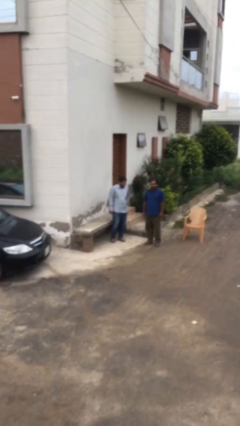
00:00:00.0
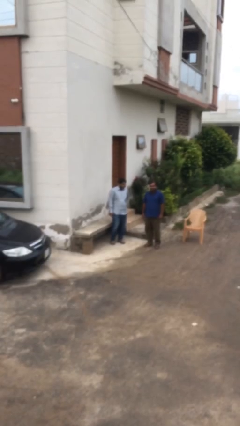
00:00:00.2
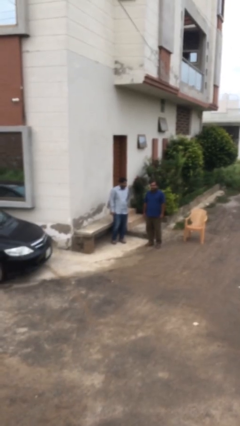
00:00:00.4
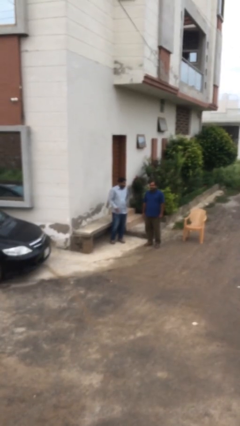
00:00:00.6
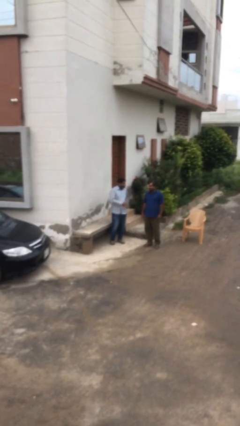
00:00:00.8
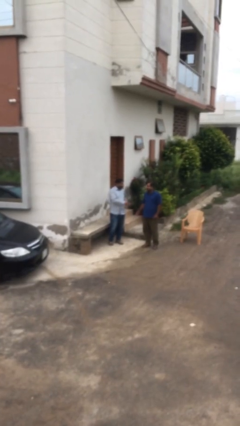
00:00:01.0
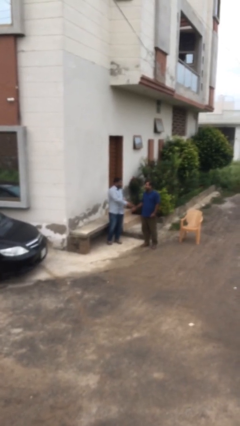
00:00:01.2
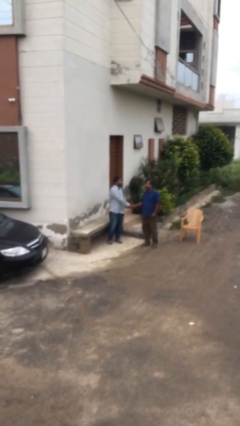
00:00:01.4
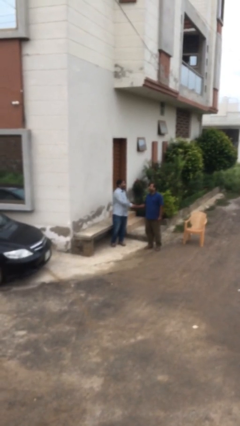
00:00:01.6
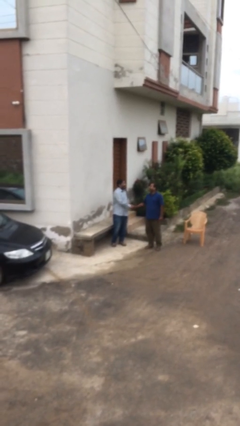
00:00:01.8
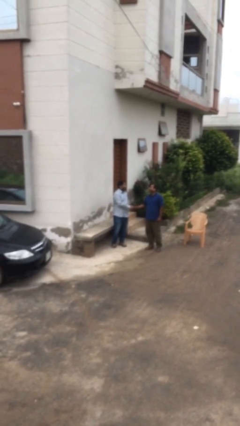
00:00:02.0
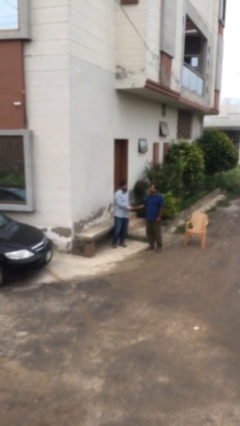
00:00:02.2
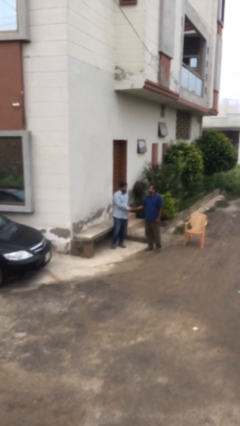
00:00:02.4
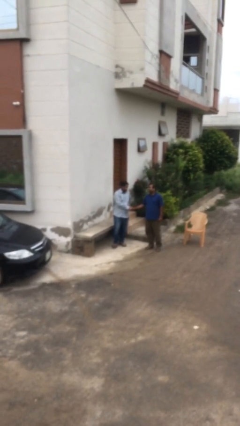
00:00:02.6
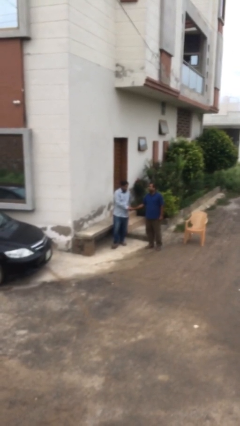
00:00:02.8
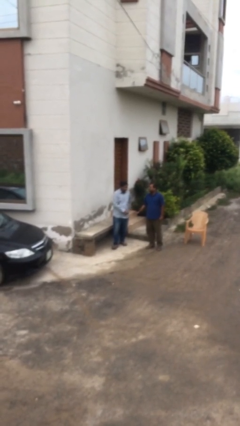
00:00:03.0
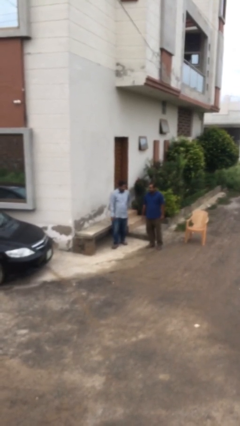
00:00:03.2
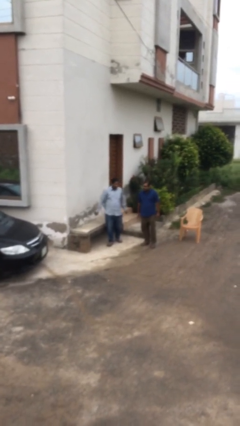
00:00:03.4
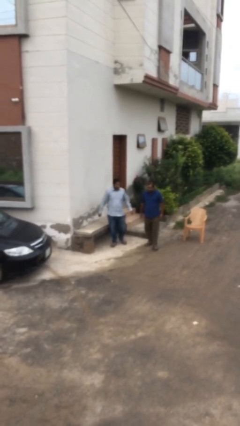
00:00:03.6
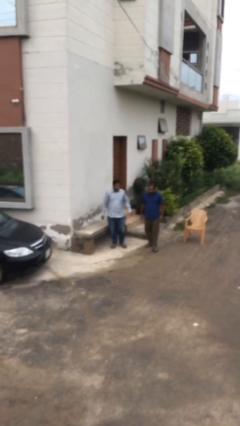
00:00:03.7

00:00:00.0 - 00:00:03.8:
person shakes hand

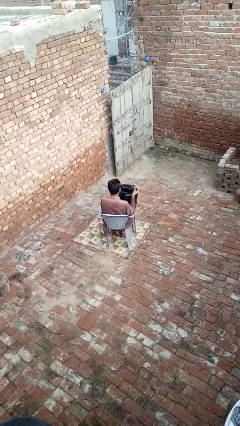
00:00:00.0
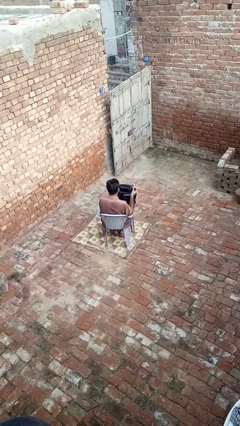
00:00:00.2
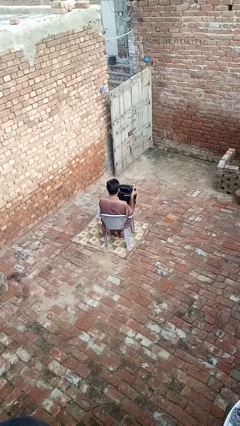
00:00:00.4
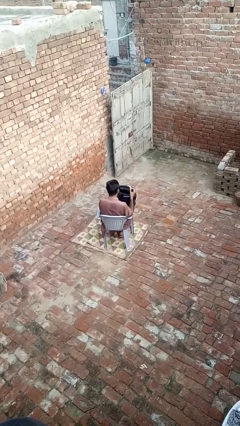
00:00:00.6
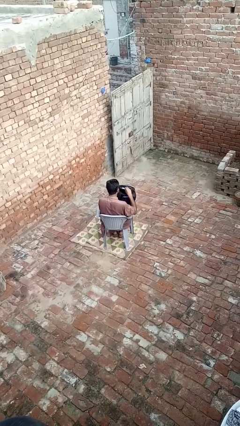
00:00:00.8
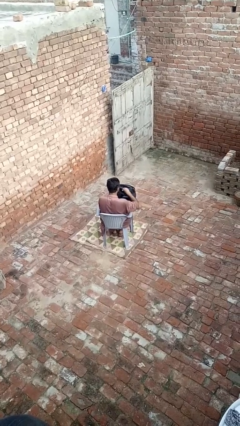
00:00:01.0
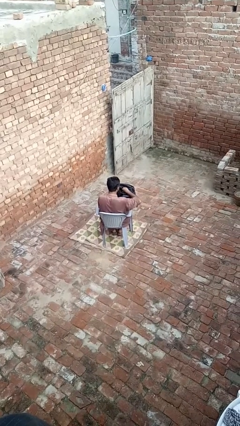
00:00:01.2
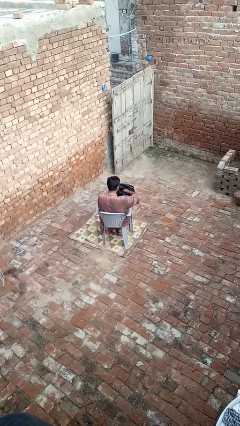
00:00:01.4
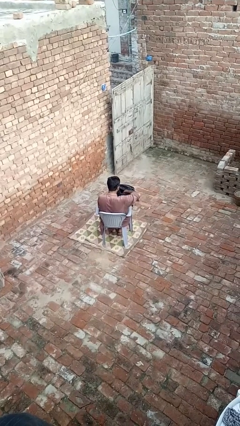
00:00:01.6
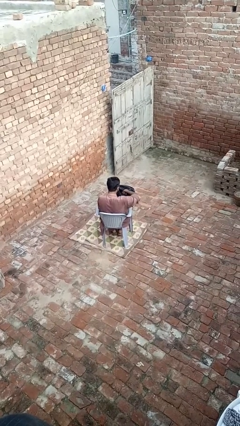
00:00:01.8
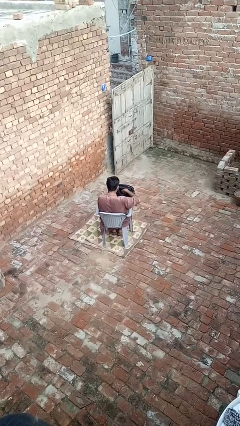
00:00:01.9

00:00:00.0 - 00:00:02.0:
person puts object into backpack

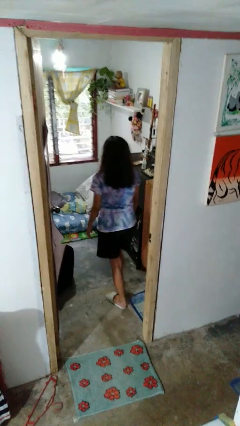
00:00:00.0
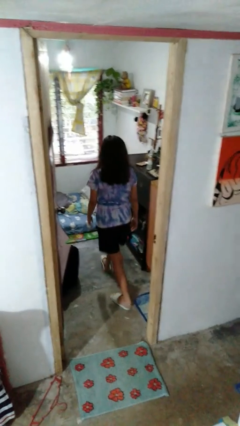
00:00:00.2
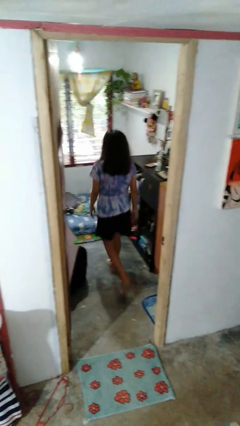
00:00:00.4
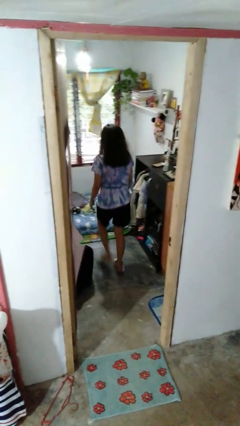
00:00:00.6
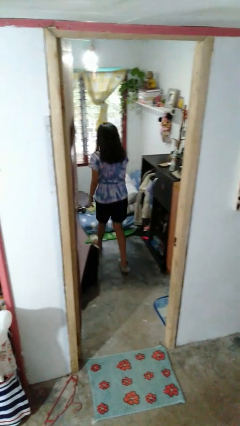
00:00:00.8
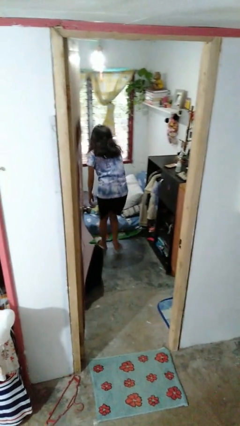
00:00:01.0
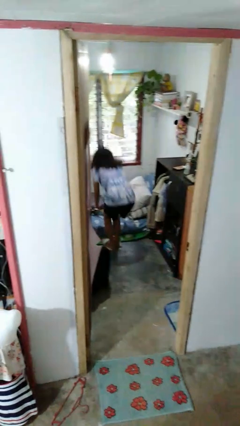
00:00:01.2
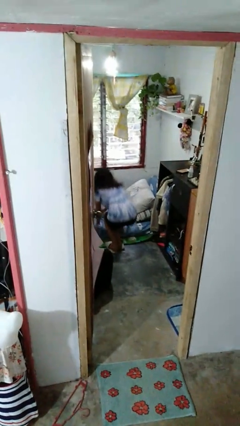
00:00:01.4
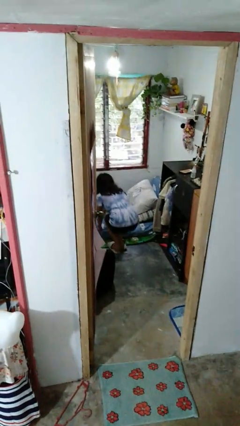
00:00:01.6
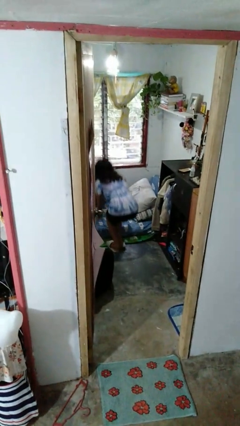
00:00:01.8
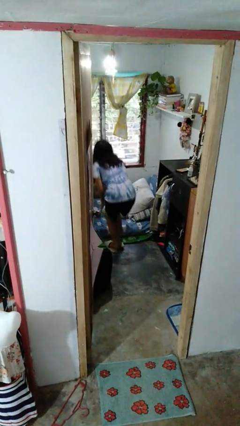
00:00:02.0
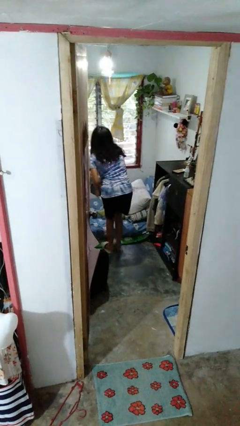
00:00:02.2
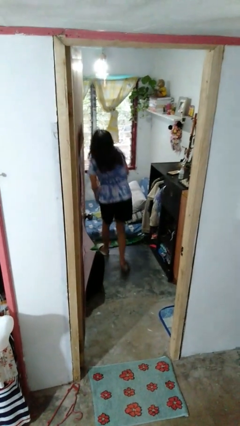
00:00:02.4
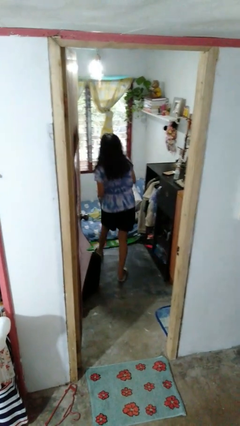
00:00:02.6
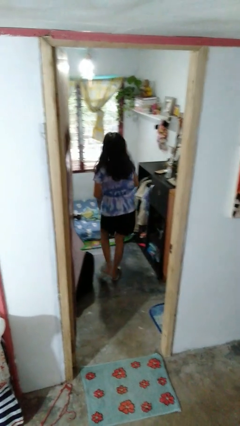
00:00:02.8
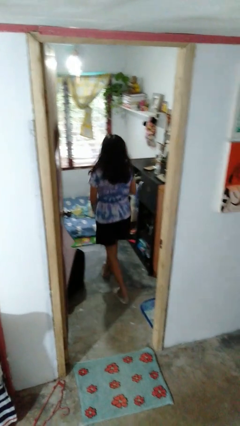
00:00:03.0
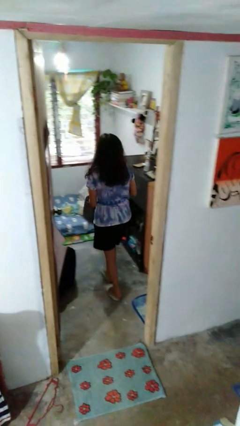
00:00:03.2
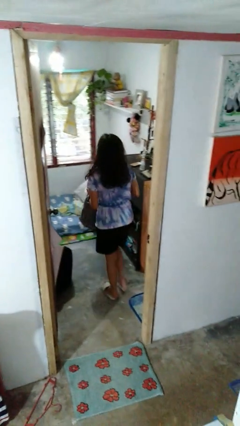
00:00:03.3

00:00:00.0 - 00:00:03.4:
person picks up object from bed

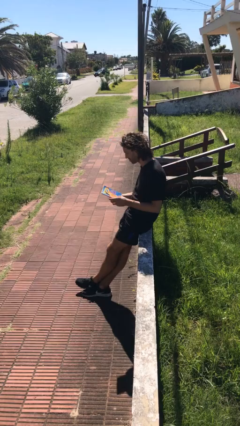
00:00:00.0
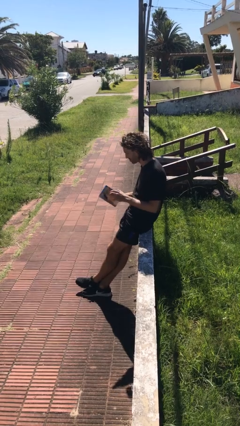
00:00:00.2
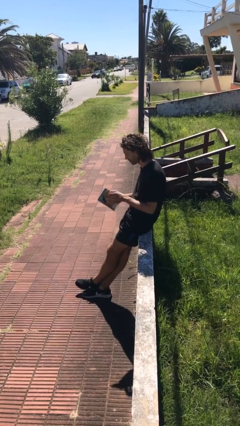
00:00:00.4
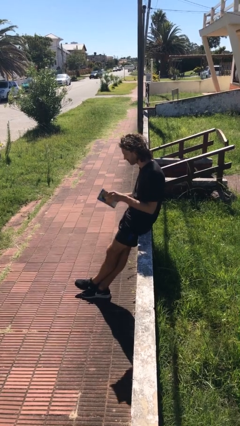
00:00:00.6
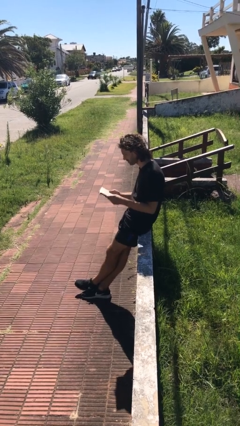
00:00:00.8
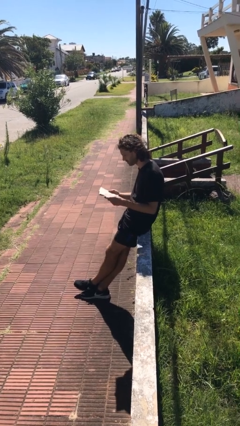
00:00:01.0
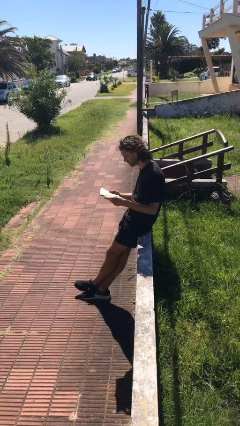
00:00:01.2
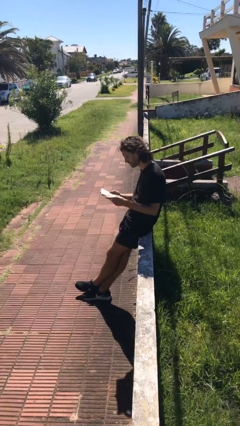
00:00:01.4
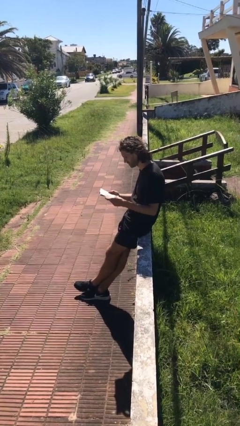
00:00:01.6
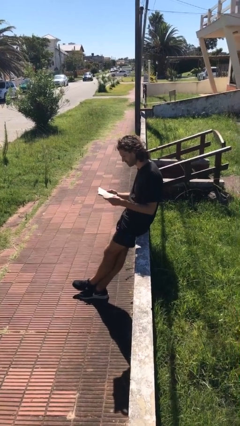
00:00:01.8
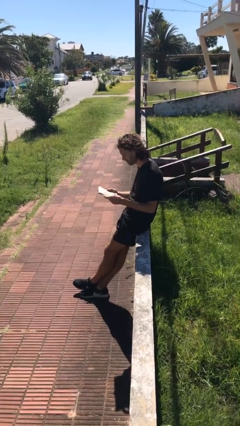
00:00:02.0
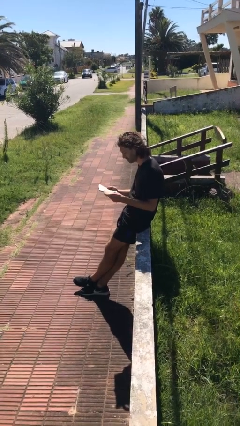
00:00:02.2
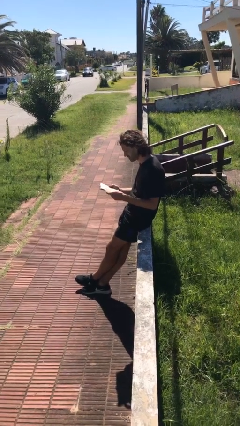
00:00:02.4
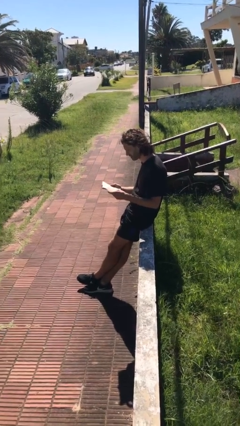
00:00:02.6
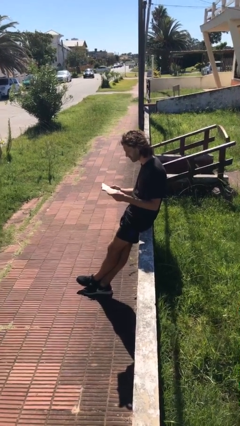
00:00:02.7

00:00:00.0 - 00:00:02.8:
person reads document

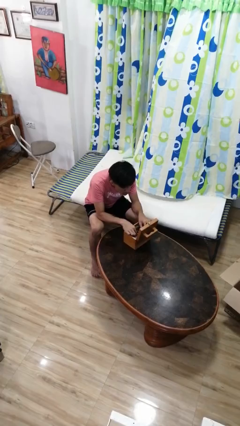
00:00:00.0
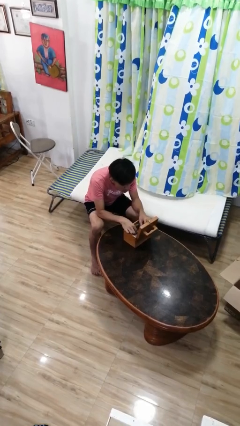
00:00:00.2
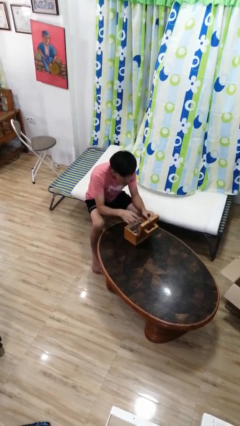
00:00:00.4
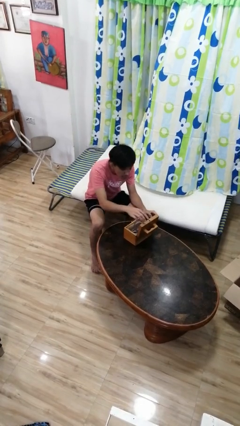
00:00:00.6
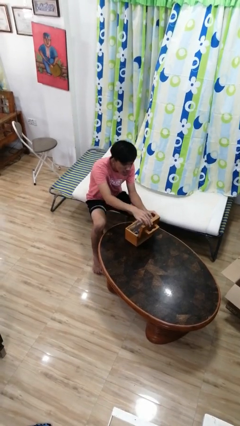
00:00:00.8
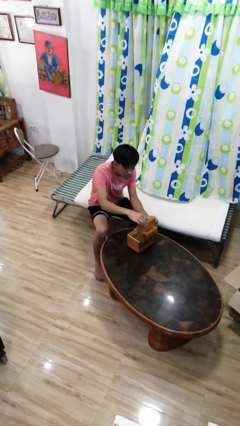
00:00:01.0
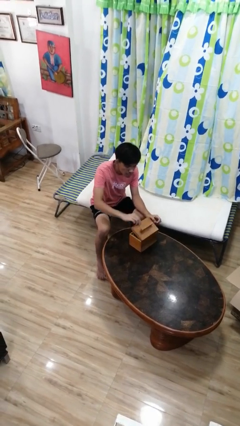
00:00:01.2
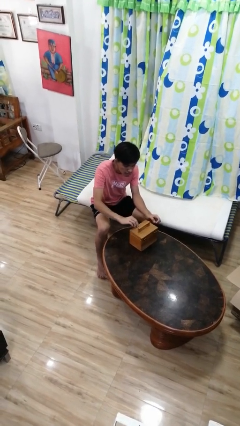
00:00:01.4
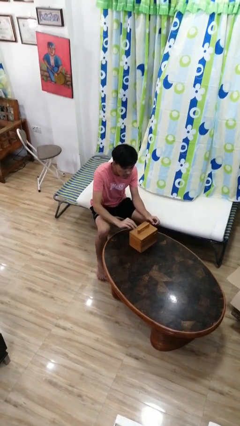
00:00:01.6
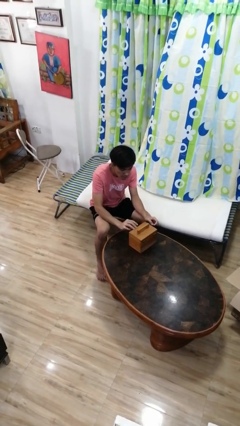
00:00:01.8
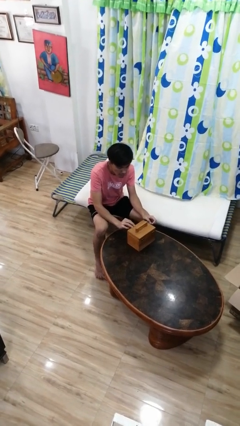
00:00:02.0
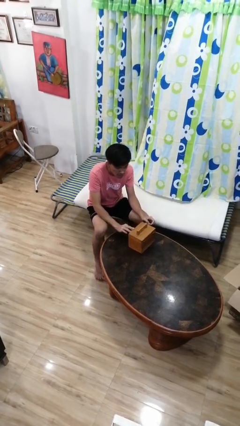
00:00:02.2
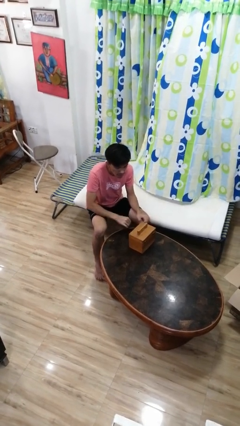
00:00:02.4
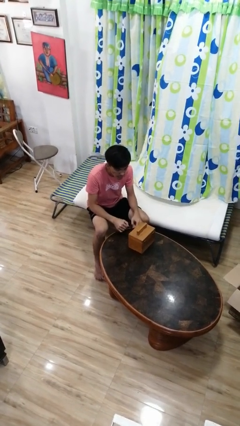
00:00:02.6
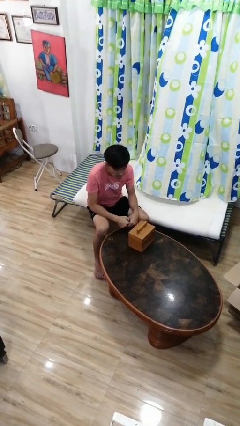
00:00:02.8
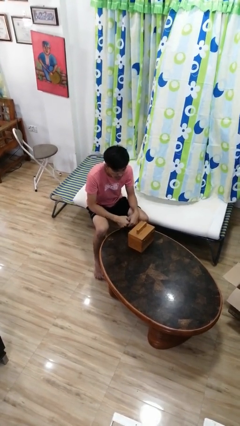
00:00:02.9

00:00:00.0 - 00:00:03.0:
person closes jewelry box

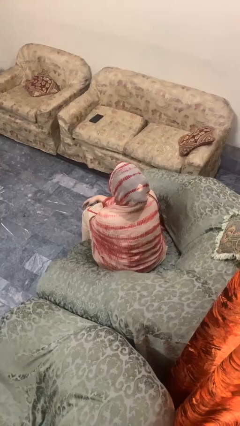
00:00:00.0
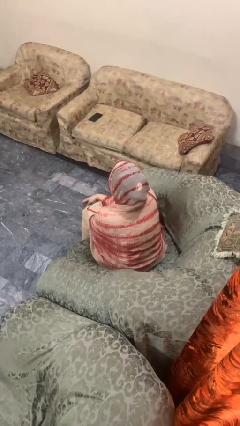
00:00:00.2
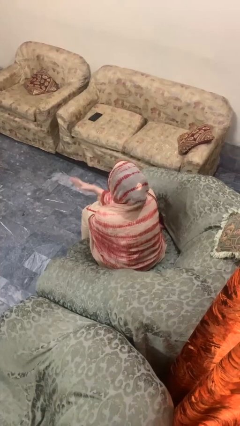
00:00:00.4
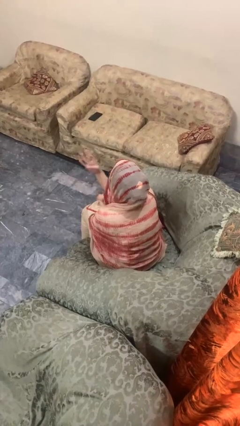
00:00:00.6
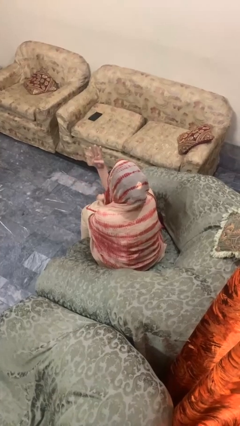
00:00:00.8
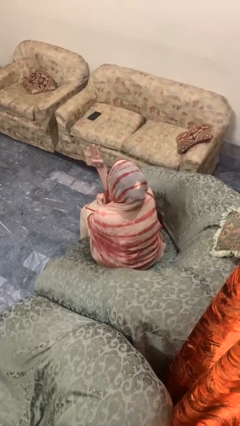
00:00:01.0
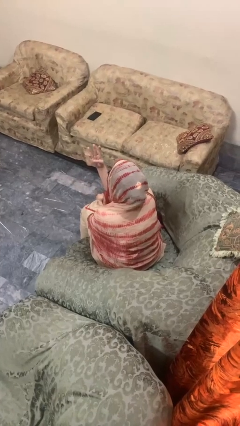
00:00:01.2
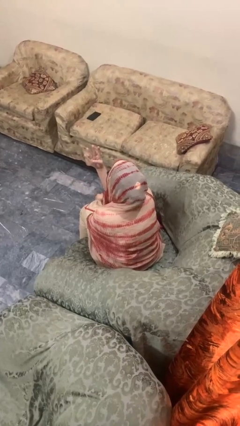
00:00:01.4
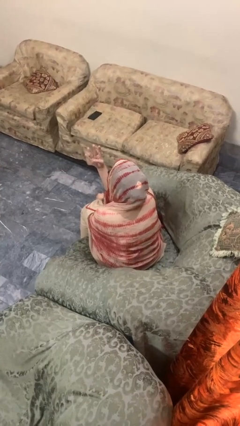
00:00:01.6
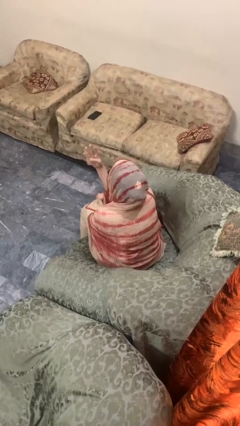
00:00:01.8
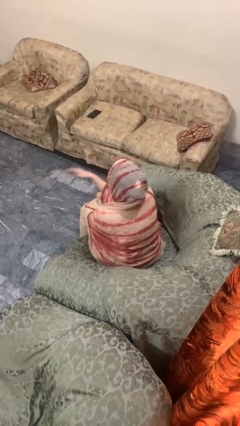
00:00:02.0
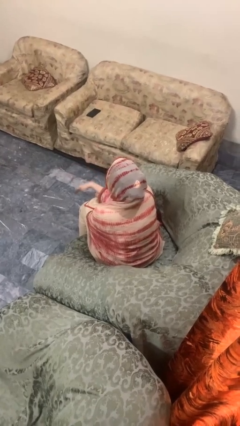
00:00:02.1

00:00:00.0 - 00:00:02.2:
person gestures number four

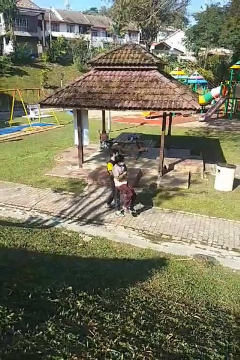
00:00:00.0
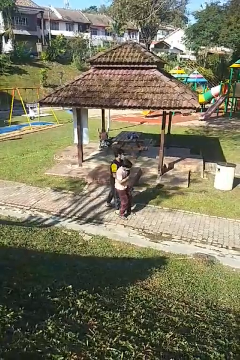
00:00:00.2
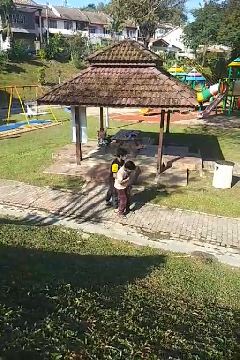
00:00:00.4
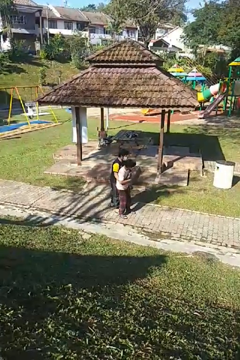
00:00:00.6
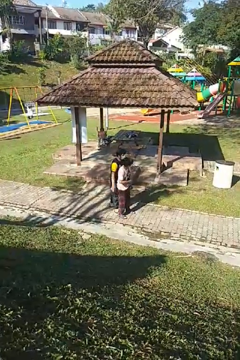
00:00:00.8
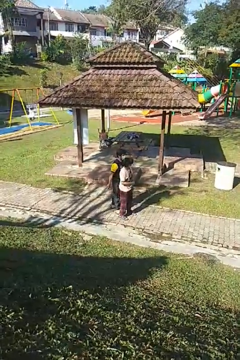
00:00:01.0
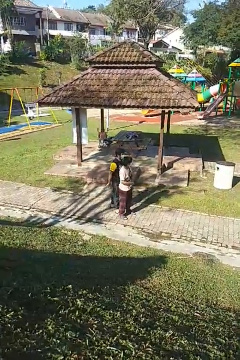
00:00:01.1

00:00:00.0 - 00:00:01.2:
person puts down person
